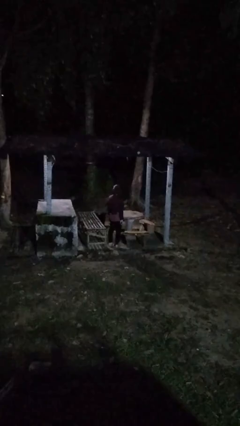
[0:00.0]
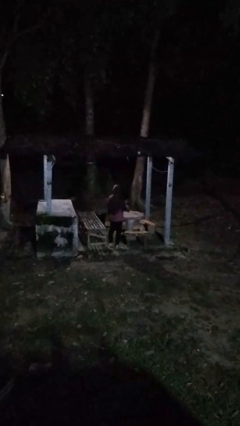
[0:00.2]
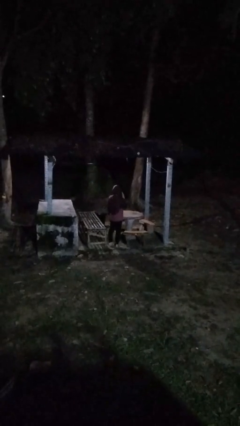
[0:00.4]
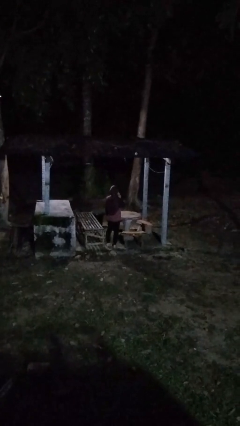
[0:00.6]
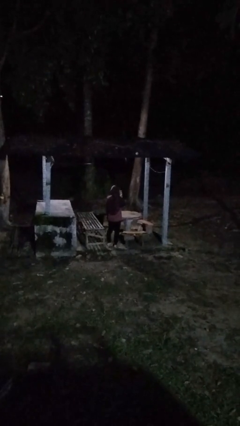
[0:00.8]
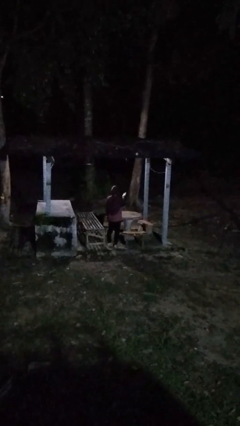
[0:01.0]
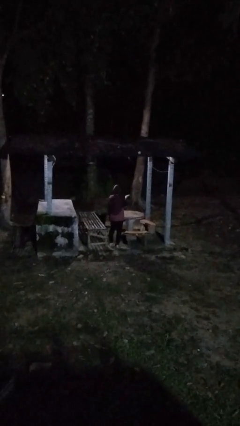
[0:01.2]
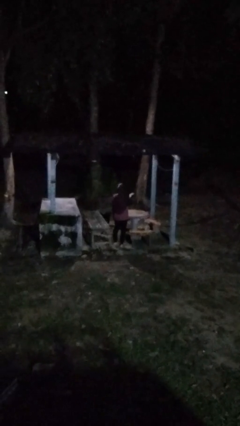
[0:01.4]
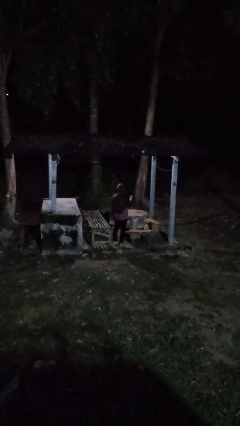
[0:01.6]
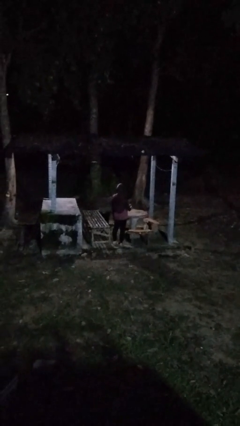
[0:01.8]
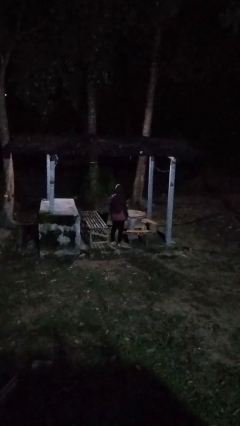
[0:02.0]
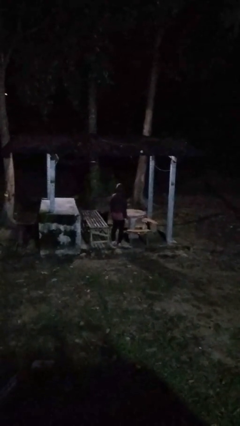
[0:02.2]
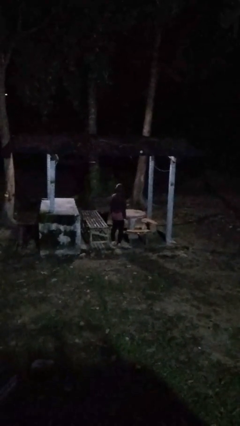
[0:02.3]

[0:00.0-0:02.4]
person gestures blow kiss

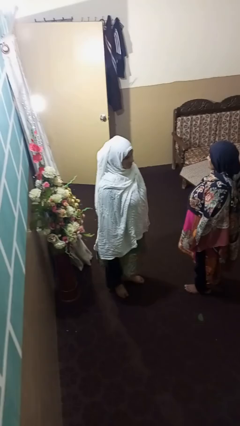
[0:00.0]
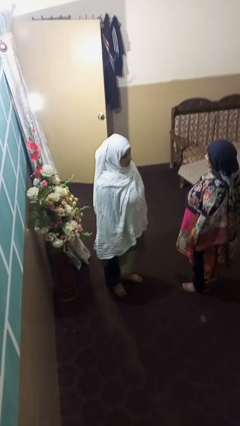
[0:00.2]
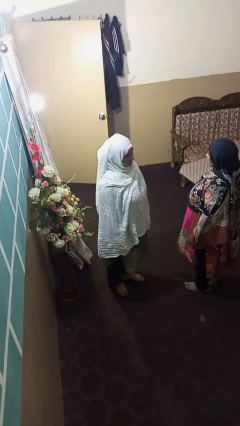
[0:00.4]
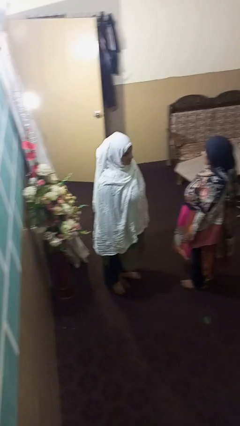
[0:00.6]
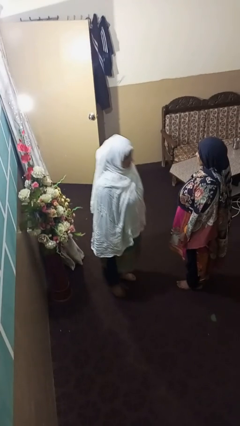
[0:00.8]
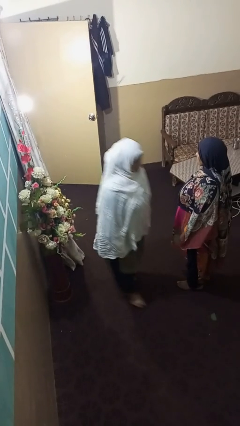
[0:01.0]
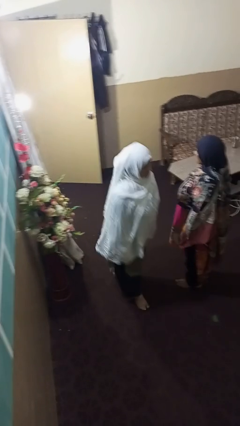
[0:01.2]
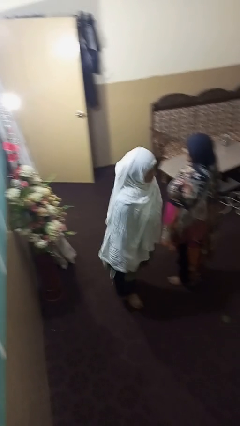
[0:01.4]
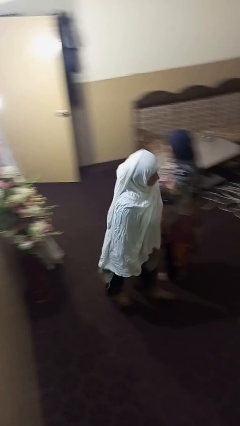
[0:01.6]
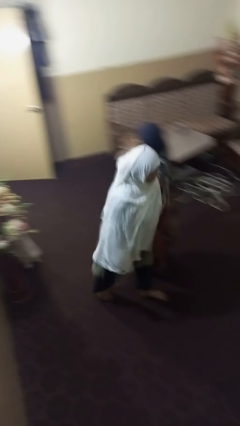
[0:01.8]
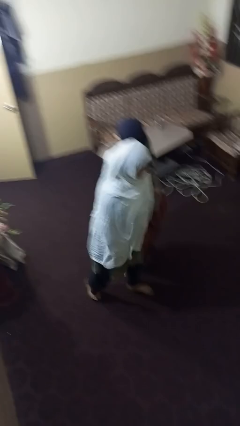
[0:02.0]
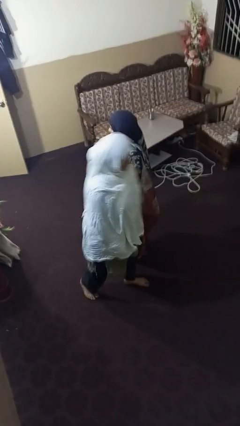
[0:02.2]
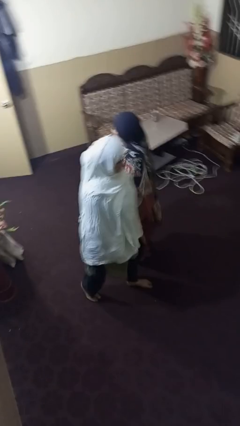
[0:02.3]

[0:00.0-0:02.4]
person shoves person

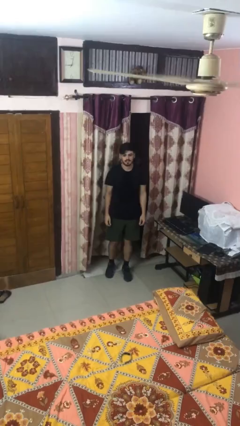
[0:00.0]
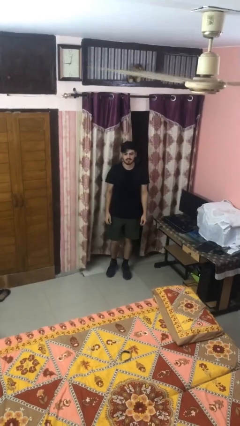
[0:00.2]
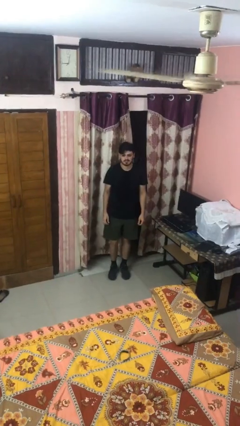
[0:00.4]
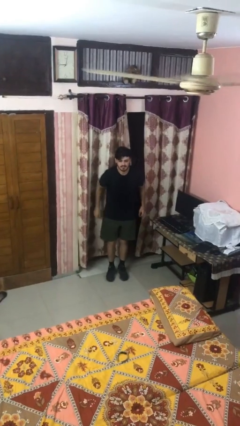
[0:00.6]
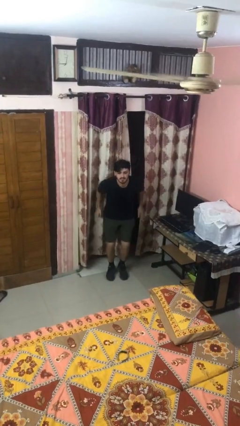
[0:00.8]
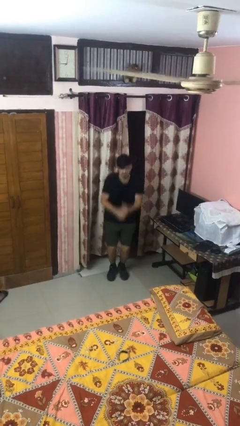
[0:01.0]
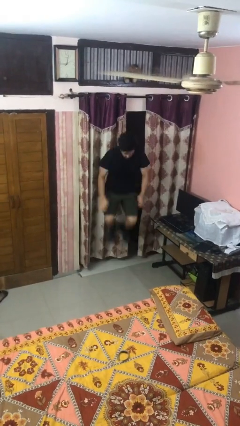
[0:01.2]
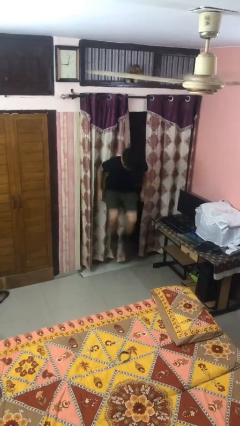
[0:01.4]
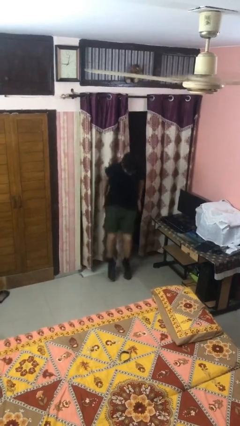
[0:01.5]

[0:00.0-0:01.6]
person jumps

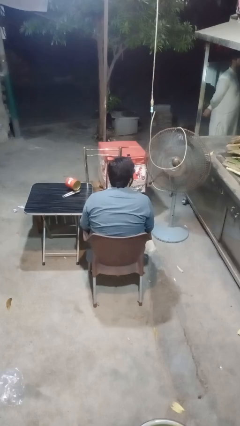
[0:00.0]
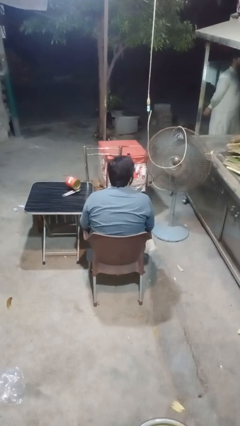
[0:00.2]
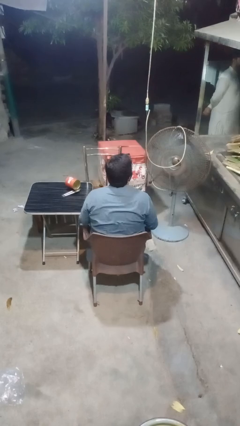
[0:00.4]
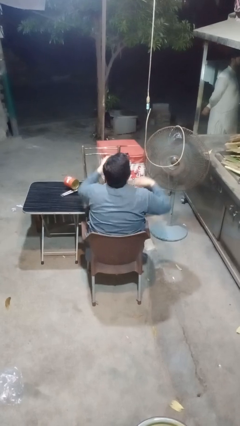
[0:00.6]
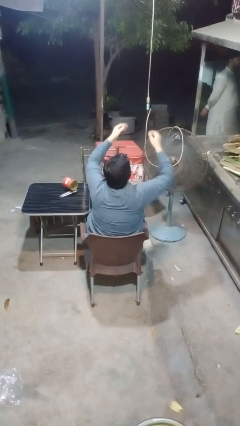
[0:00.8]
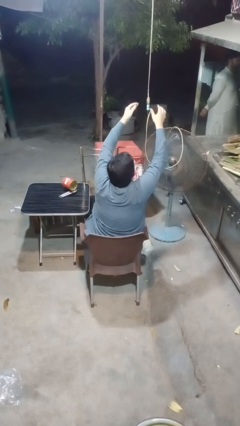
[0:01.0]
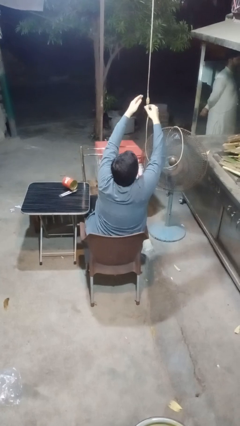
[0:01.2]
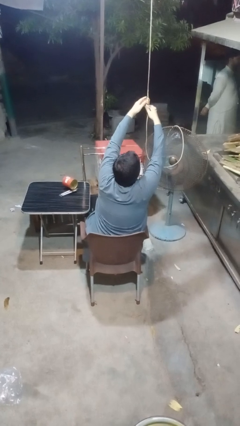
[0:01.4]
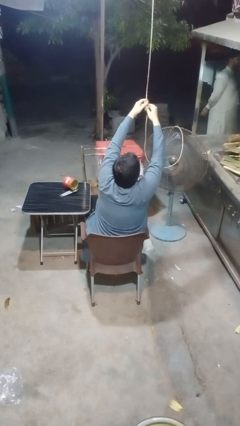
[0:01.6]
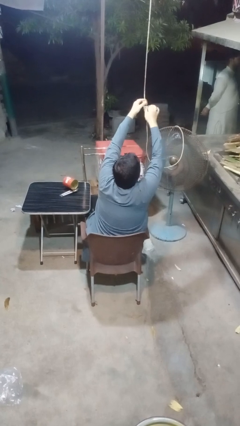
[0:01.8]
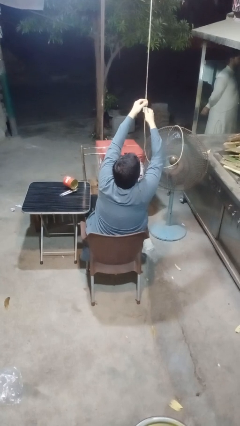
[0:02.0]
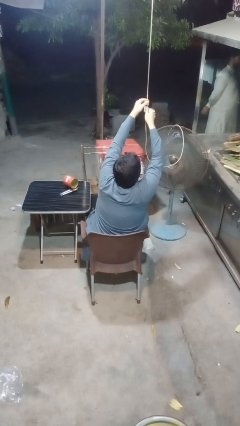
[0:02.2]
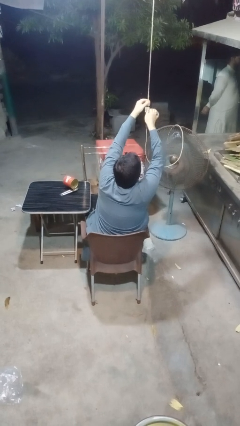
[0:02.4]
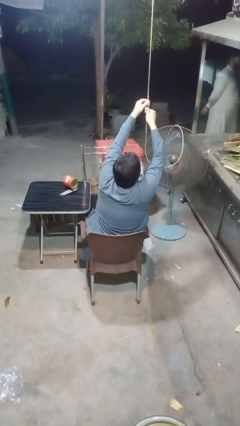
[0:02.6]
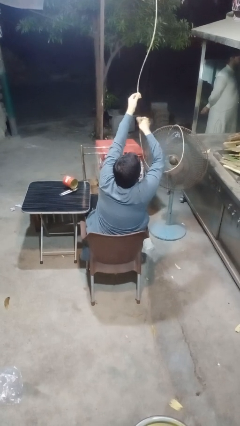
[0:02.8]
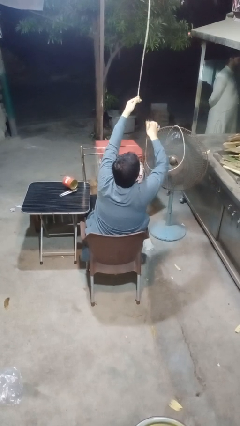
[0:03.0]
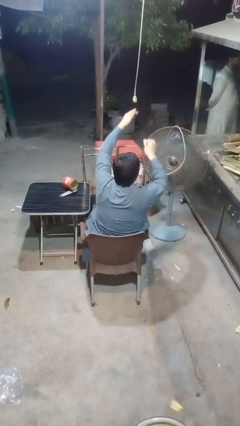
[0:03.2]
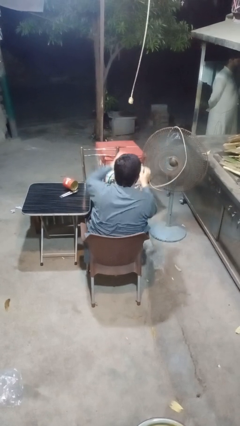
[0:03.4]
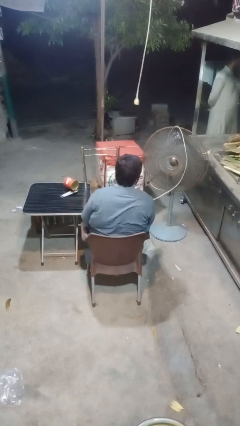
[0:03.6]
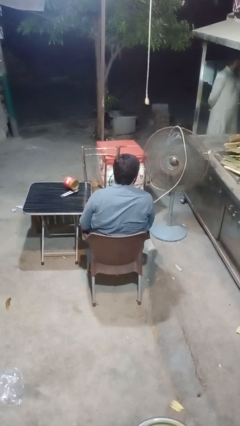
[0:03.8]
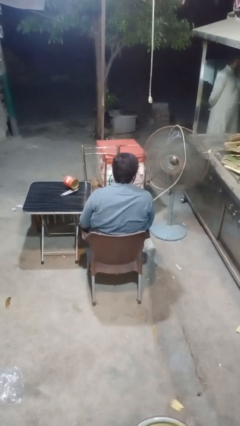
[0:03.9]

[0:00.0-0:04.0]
person turns off fan

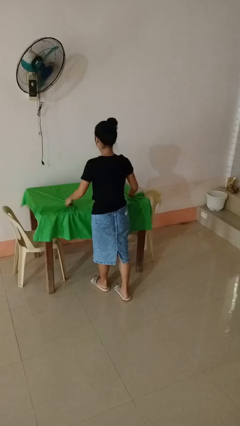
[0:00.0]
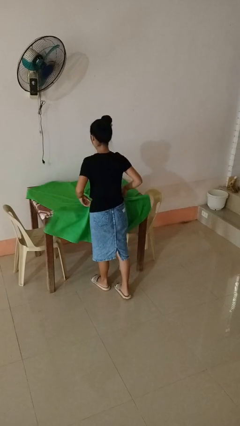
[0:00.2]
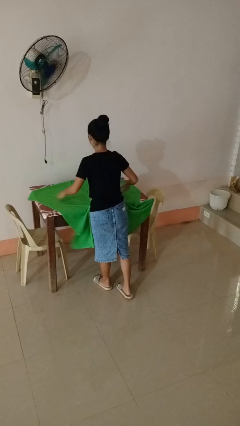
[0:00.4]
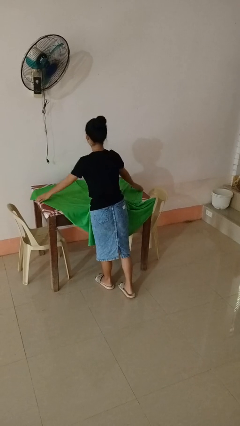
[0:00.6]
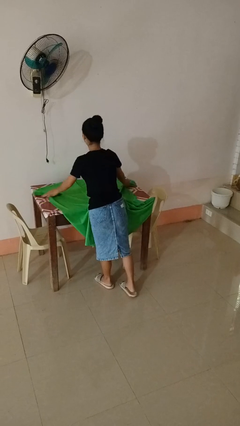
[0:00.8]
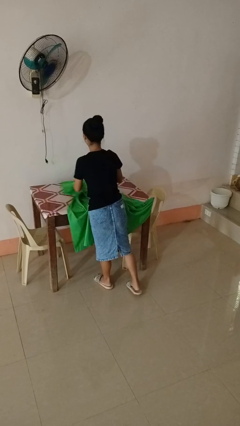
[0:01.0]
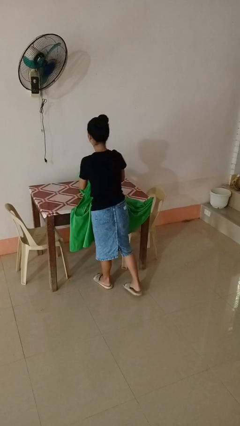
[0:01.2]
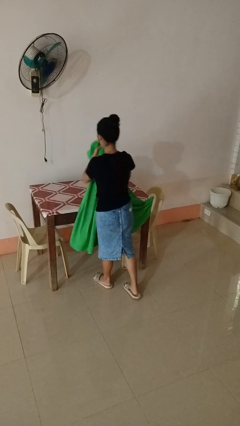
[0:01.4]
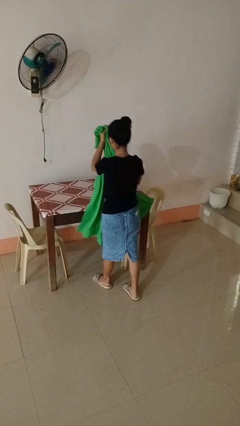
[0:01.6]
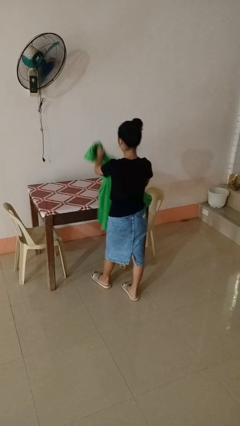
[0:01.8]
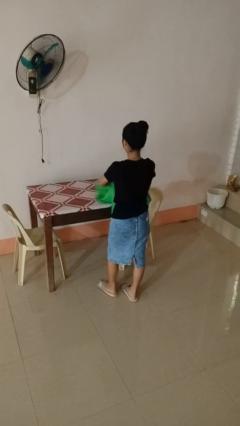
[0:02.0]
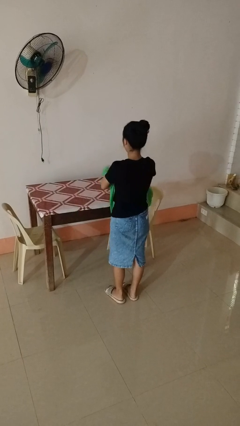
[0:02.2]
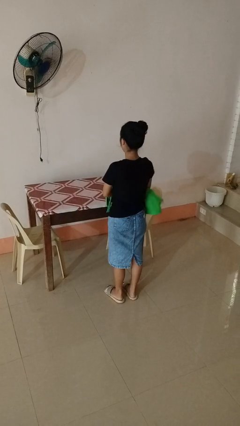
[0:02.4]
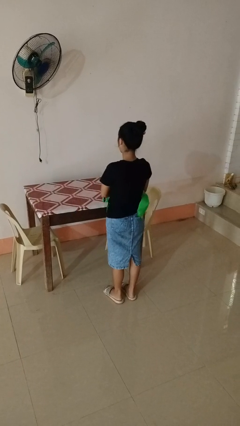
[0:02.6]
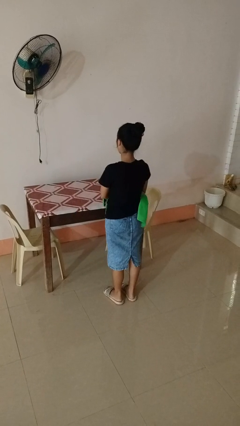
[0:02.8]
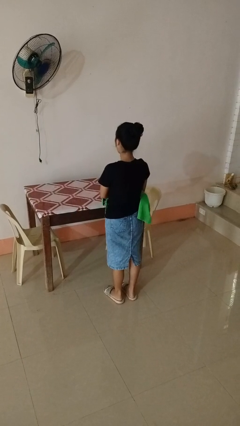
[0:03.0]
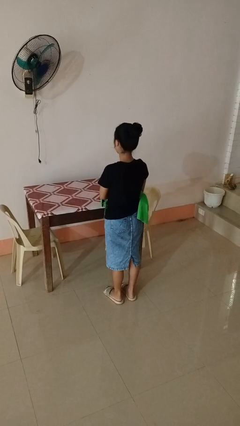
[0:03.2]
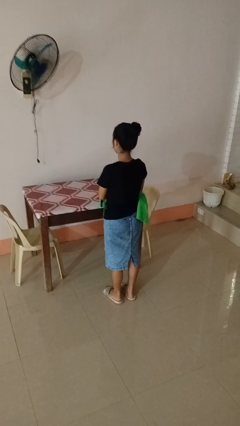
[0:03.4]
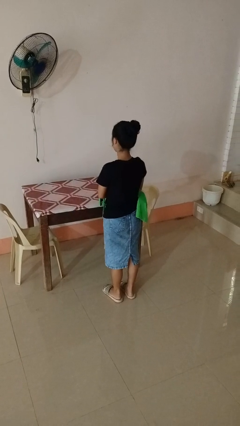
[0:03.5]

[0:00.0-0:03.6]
person folds tablecloth

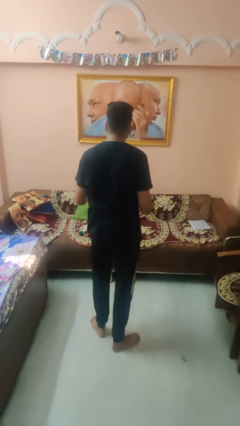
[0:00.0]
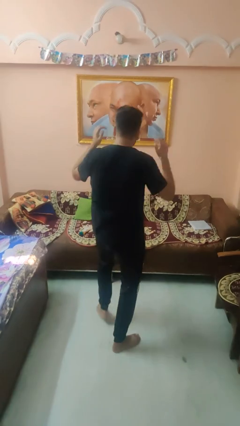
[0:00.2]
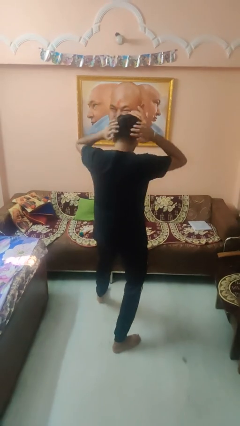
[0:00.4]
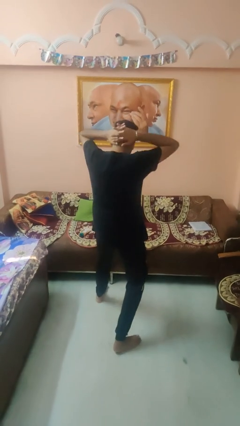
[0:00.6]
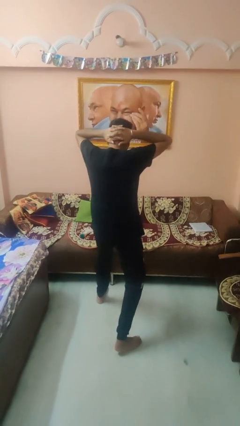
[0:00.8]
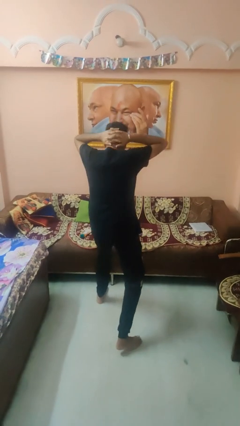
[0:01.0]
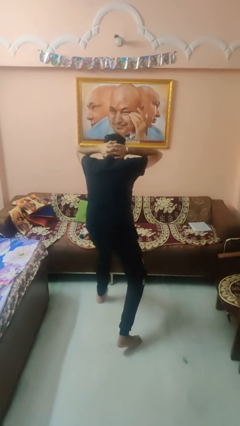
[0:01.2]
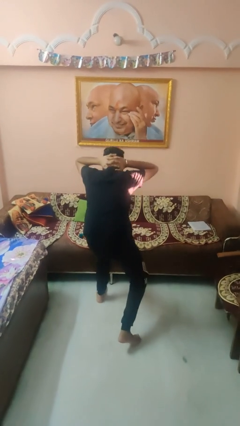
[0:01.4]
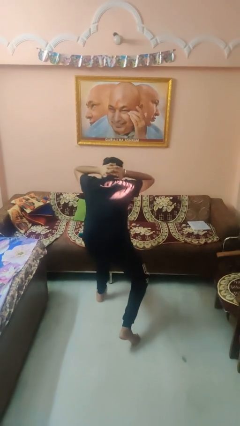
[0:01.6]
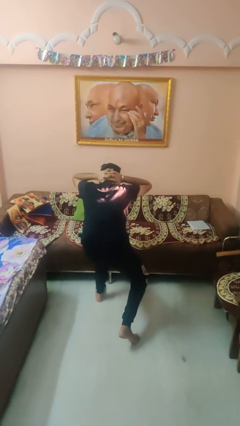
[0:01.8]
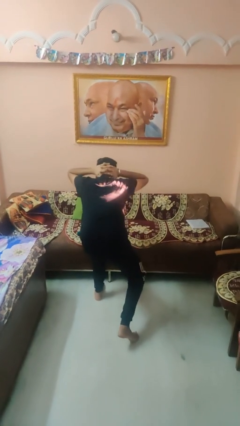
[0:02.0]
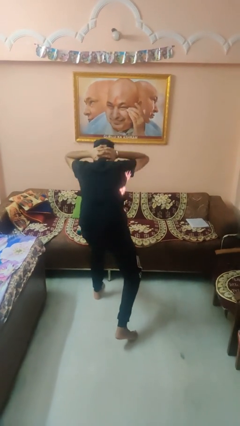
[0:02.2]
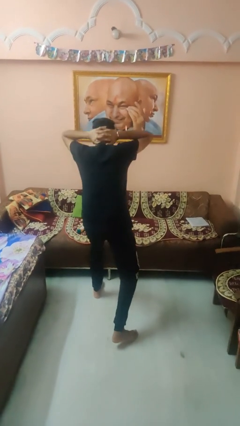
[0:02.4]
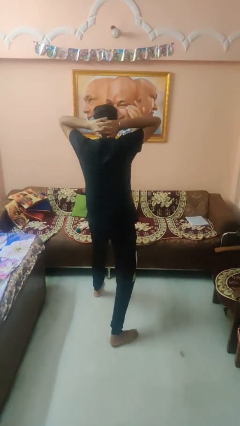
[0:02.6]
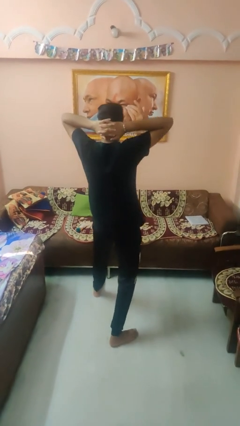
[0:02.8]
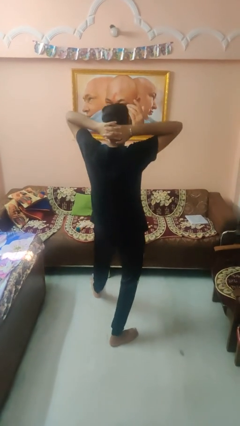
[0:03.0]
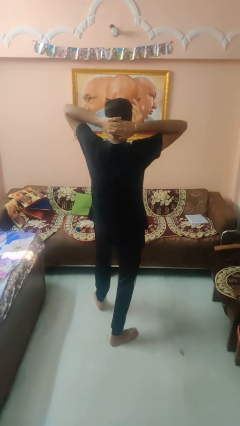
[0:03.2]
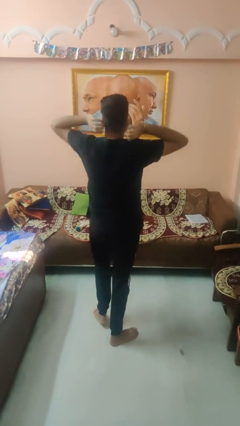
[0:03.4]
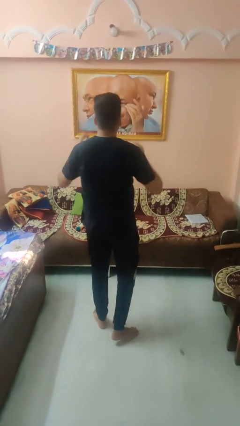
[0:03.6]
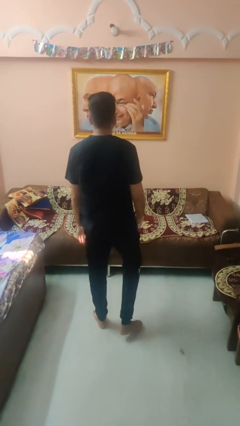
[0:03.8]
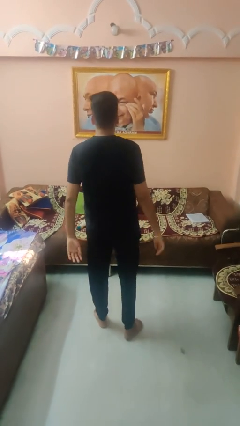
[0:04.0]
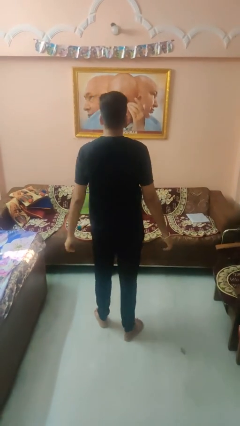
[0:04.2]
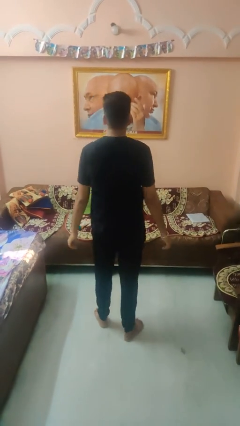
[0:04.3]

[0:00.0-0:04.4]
person exercises with lunges
